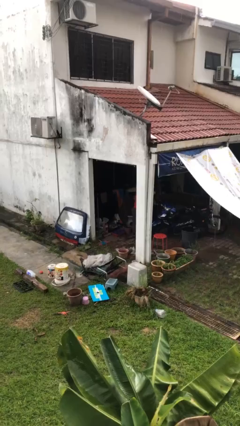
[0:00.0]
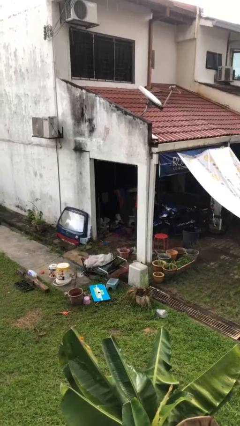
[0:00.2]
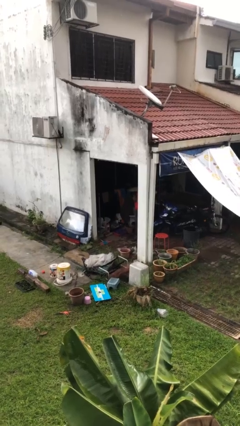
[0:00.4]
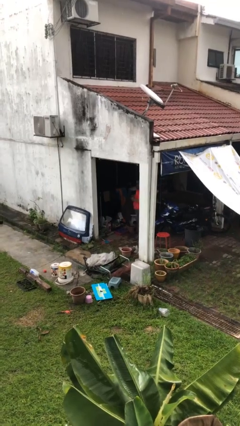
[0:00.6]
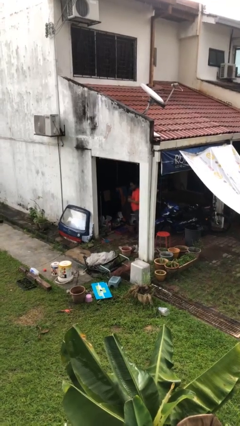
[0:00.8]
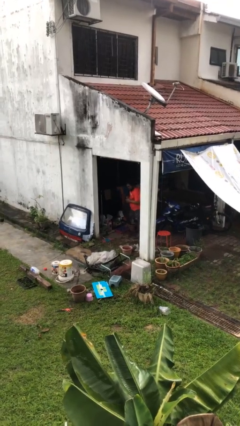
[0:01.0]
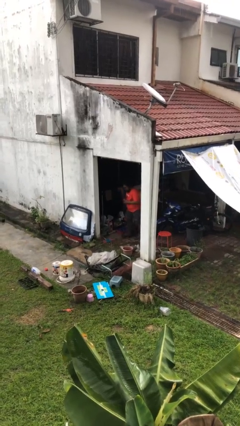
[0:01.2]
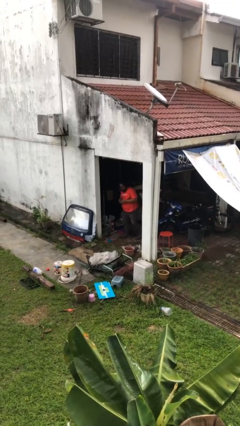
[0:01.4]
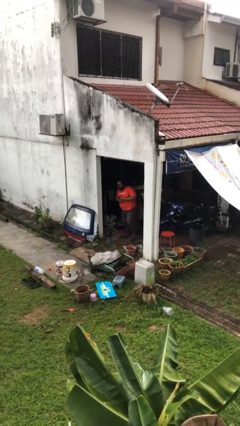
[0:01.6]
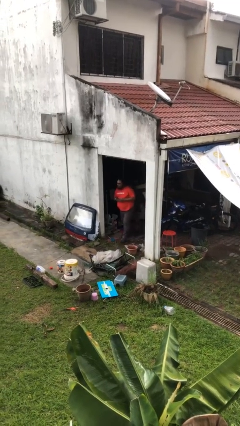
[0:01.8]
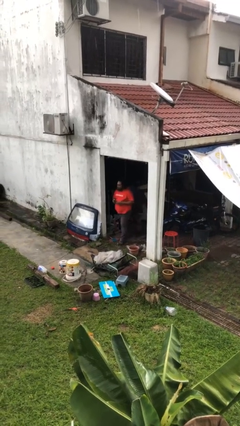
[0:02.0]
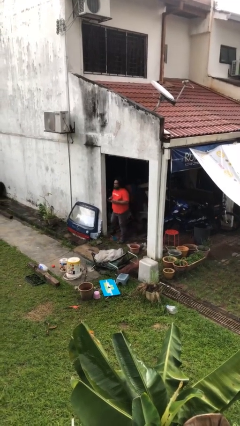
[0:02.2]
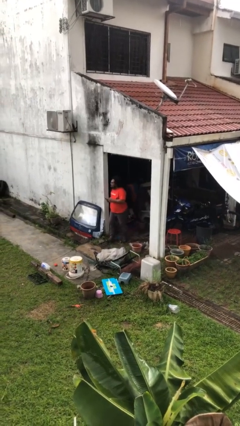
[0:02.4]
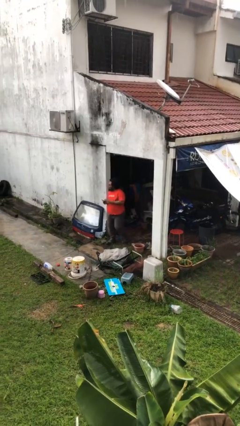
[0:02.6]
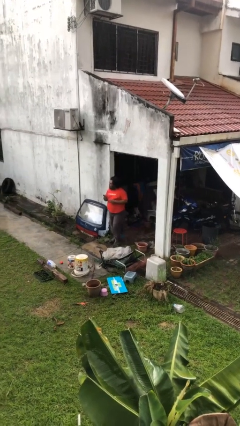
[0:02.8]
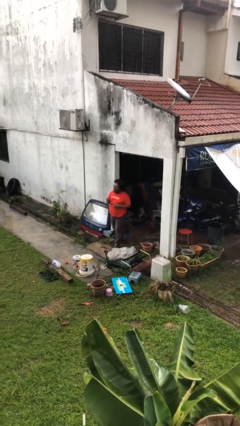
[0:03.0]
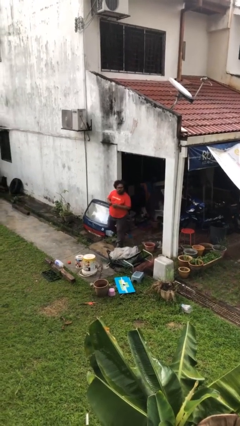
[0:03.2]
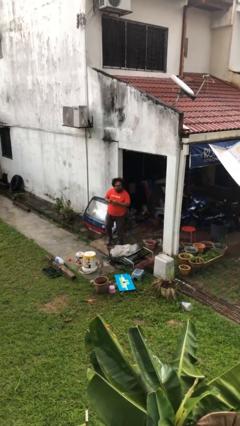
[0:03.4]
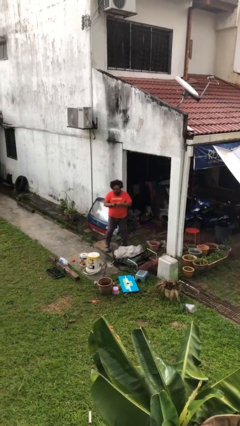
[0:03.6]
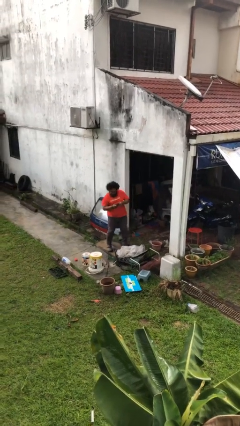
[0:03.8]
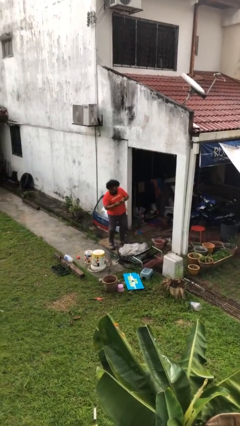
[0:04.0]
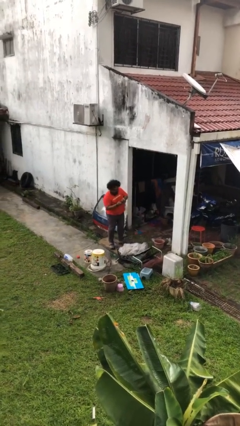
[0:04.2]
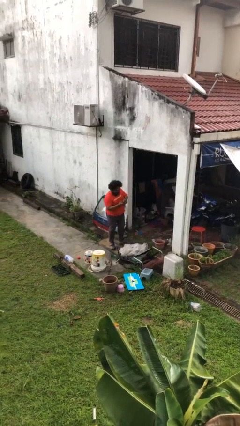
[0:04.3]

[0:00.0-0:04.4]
person enters scene through structure

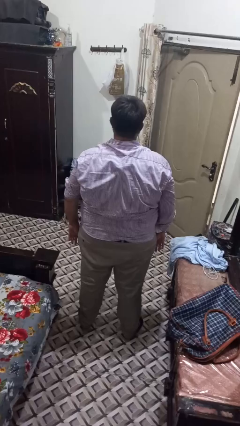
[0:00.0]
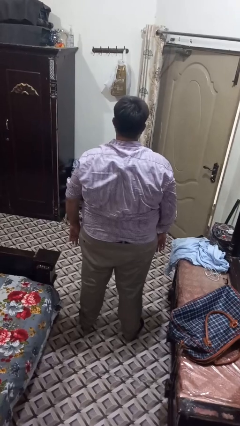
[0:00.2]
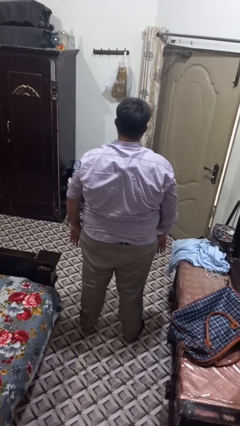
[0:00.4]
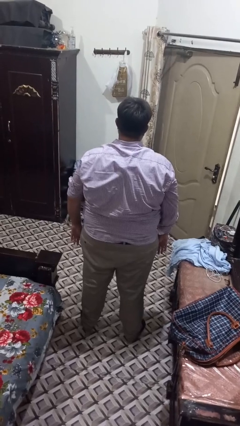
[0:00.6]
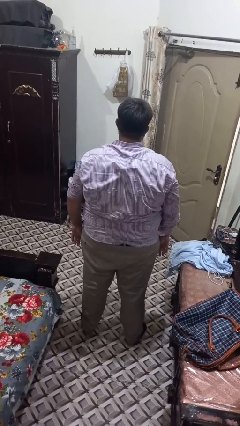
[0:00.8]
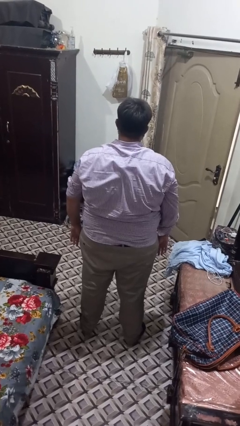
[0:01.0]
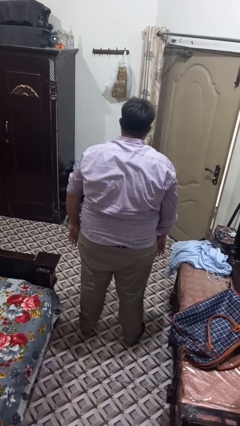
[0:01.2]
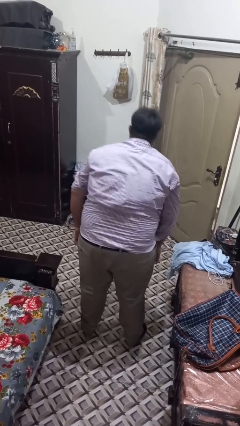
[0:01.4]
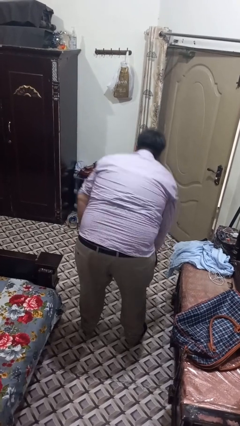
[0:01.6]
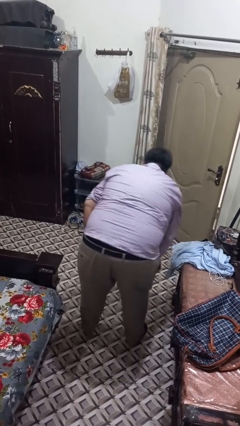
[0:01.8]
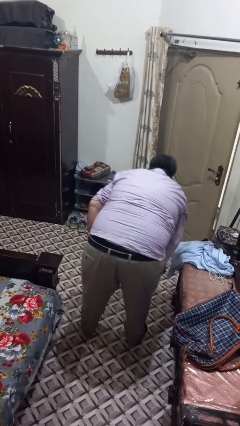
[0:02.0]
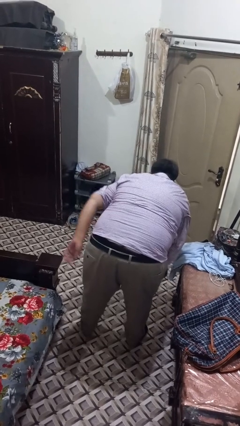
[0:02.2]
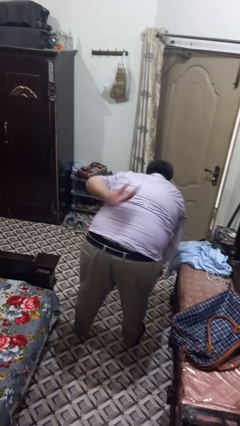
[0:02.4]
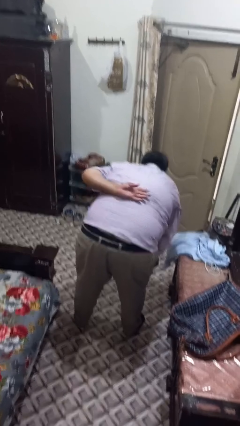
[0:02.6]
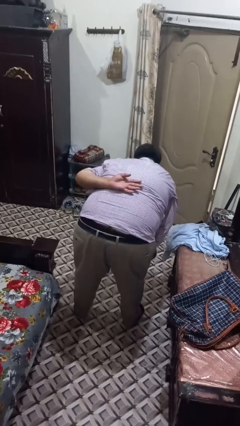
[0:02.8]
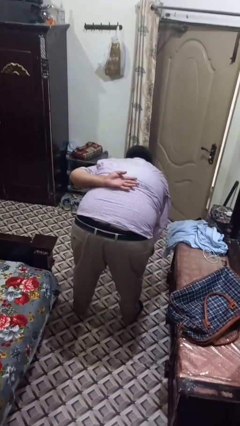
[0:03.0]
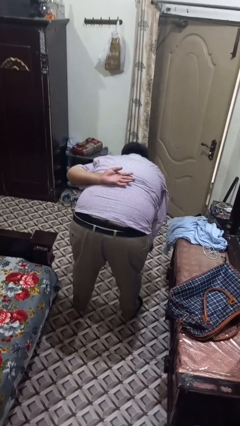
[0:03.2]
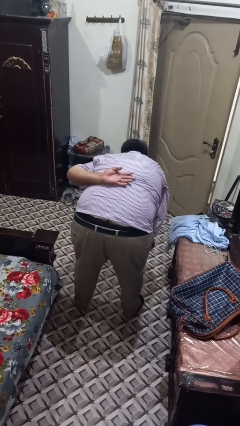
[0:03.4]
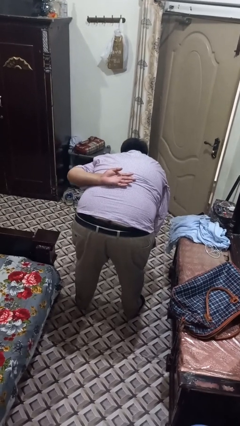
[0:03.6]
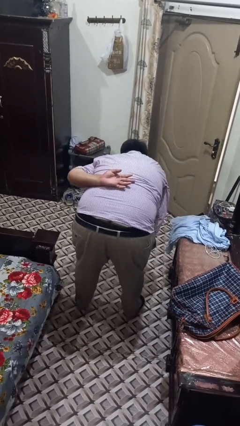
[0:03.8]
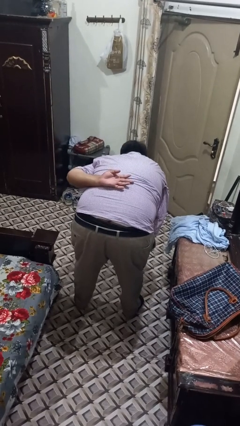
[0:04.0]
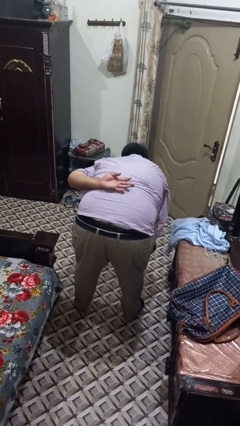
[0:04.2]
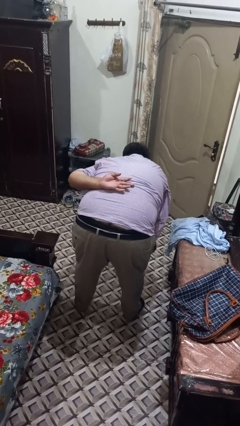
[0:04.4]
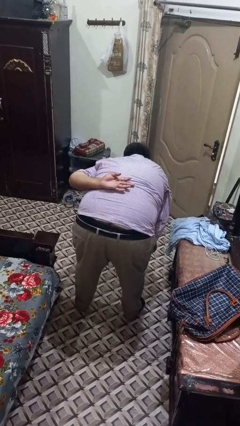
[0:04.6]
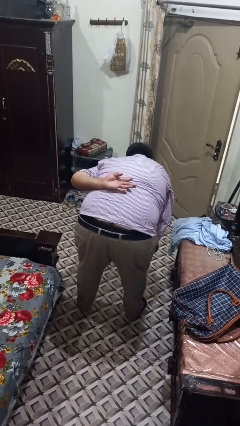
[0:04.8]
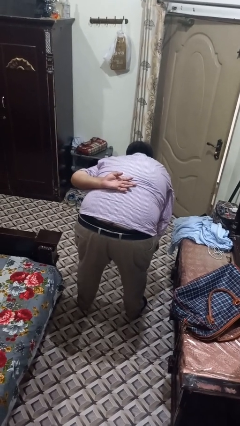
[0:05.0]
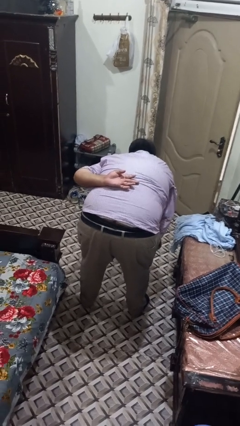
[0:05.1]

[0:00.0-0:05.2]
person kneels

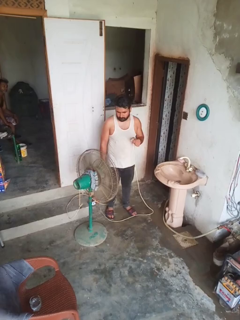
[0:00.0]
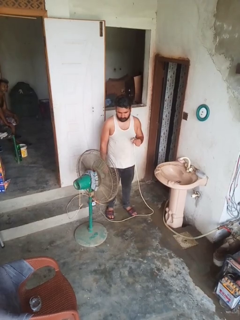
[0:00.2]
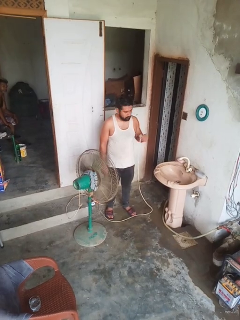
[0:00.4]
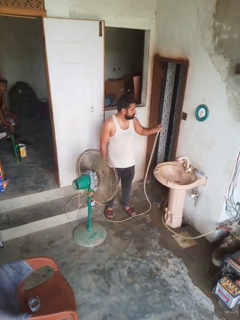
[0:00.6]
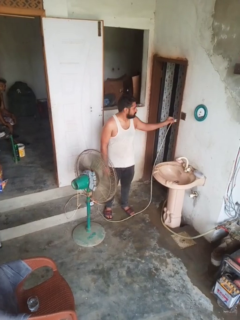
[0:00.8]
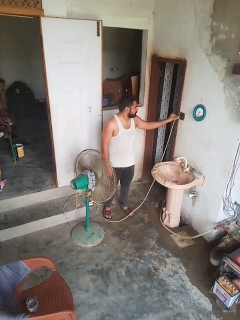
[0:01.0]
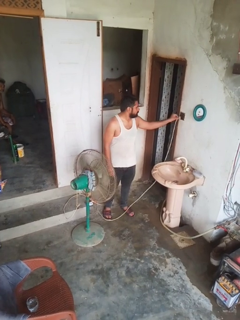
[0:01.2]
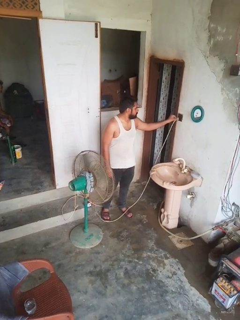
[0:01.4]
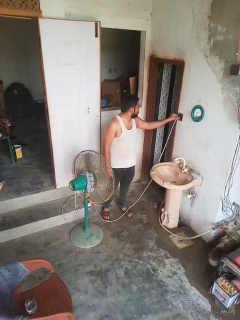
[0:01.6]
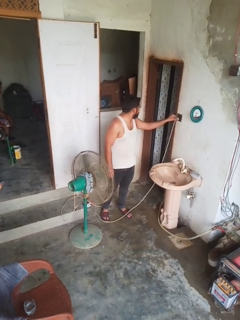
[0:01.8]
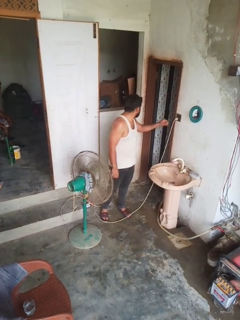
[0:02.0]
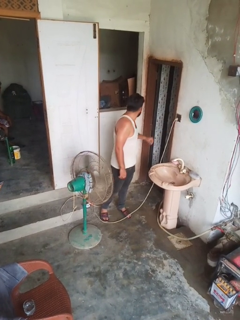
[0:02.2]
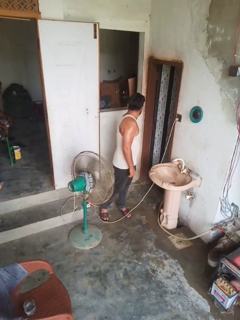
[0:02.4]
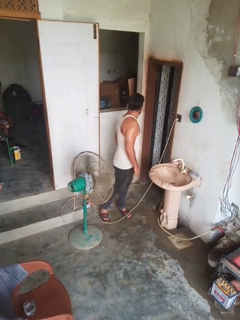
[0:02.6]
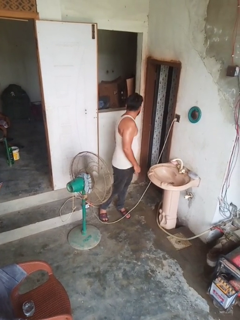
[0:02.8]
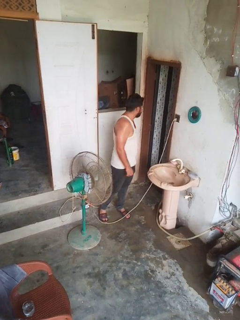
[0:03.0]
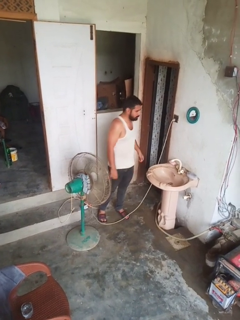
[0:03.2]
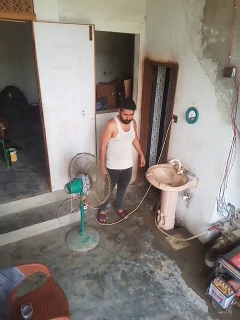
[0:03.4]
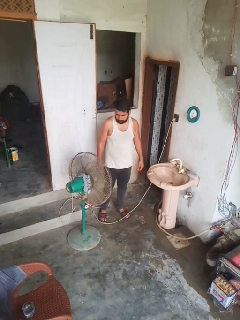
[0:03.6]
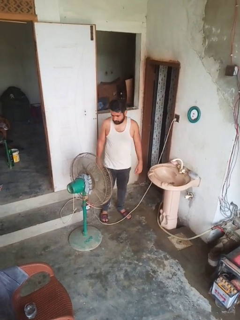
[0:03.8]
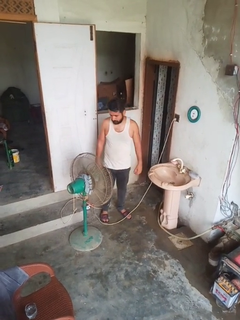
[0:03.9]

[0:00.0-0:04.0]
person turns on fan

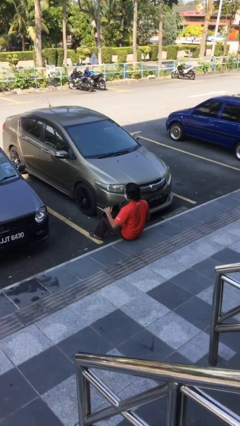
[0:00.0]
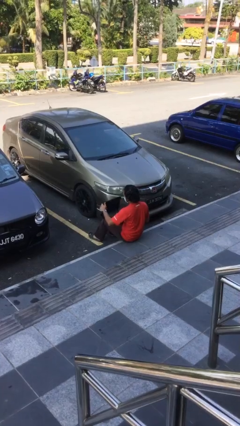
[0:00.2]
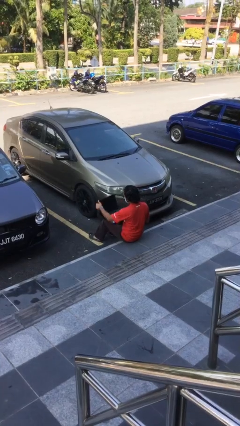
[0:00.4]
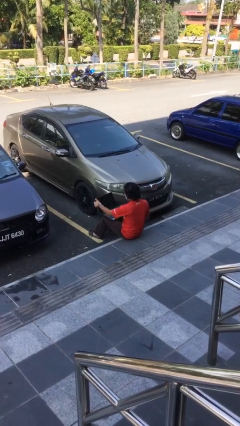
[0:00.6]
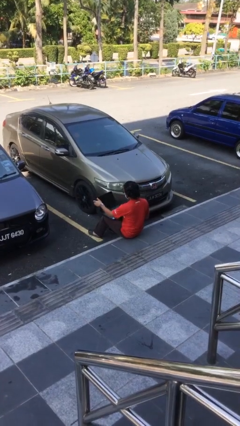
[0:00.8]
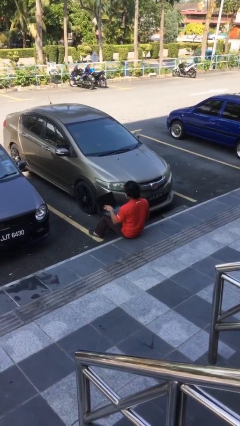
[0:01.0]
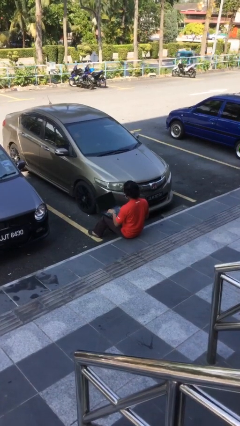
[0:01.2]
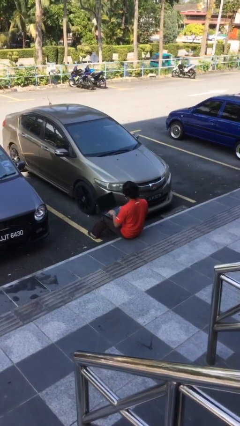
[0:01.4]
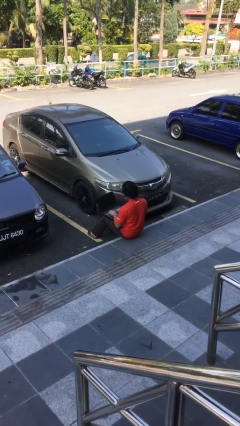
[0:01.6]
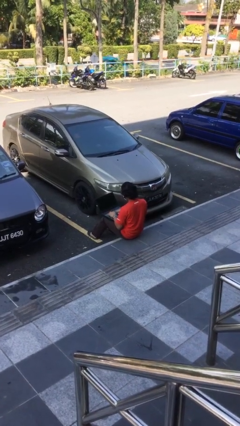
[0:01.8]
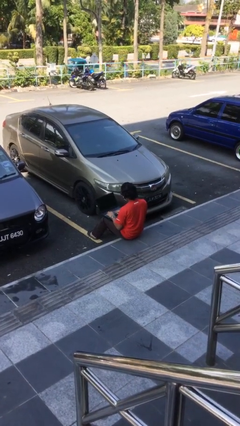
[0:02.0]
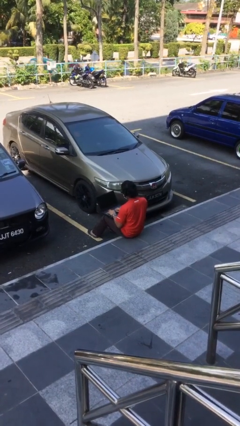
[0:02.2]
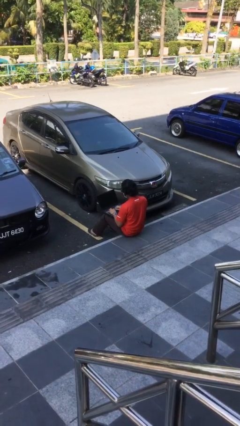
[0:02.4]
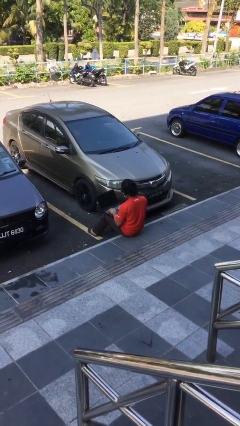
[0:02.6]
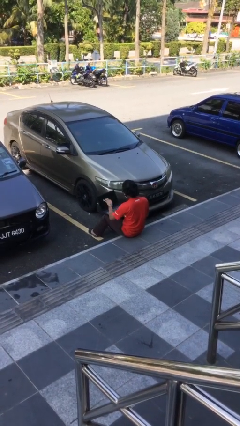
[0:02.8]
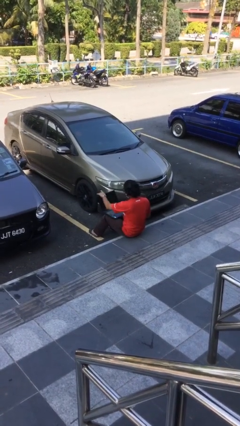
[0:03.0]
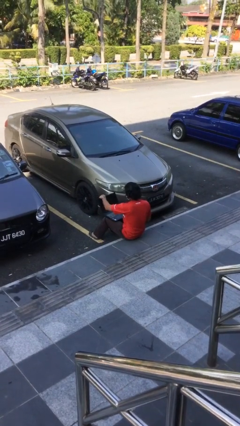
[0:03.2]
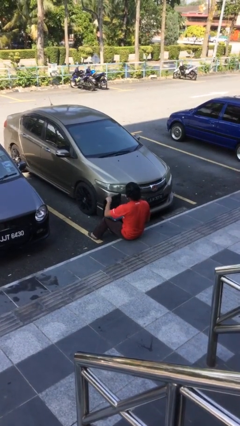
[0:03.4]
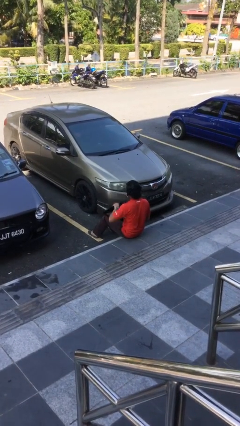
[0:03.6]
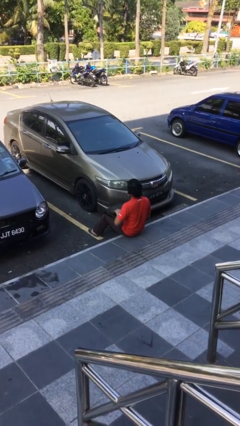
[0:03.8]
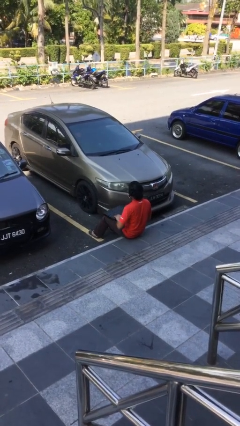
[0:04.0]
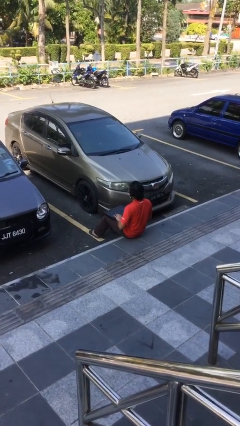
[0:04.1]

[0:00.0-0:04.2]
person interacts with laptop

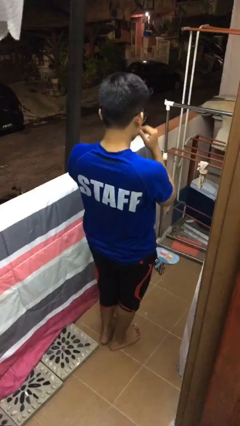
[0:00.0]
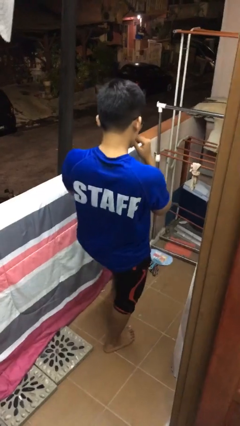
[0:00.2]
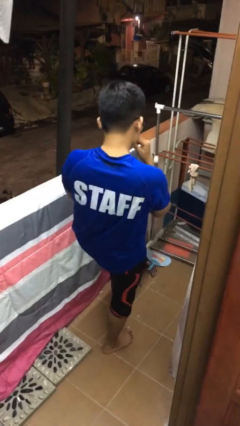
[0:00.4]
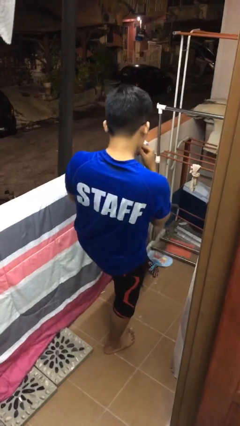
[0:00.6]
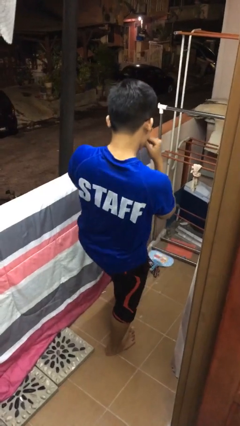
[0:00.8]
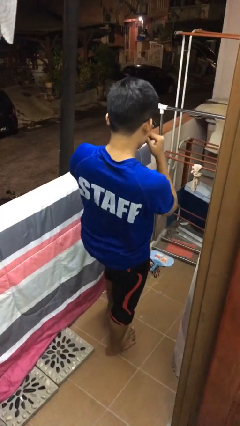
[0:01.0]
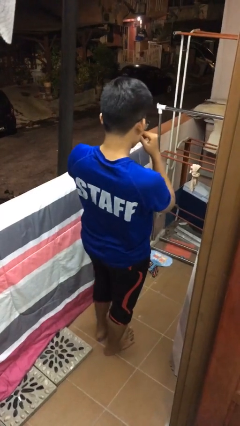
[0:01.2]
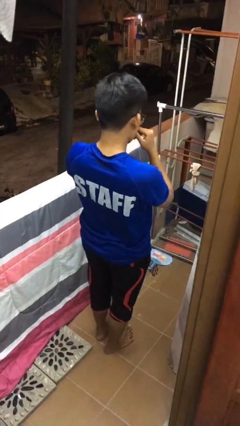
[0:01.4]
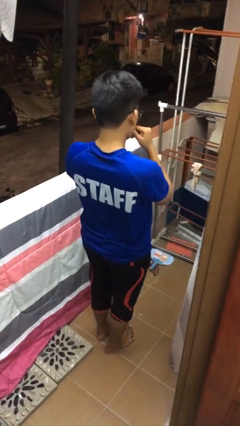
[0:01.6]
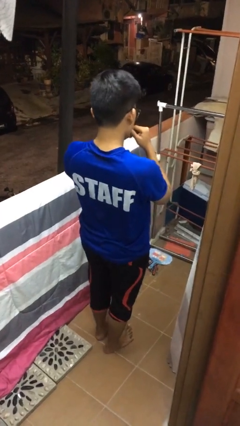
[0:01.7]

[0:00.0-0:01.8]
person karate kicks
